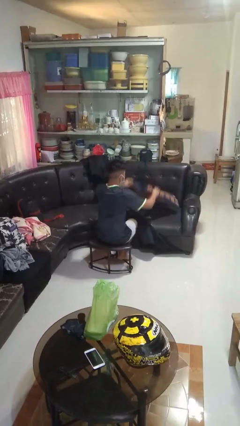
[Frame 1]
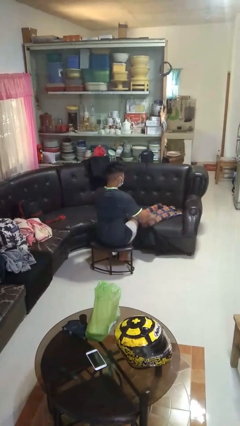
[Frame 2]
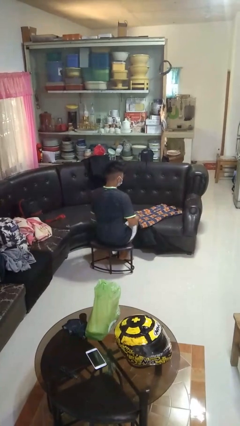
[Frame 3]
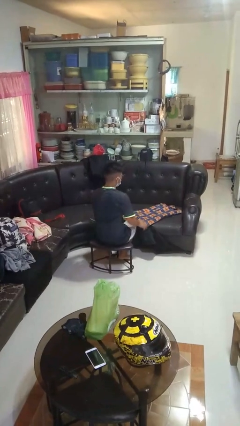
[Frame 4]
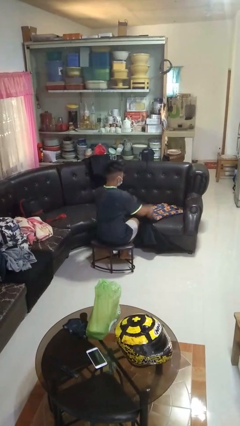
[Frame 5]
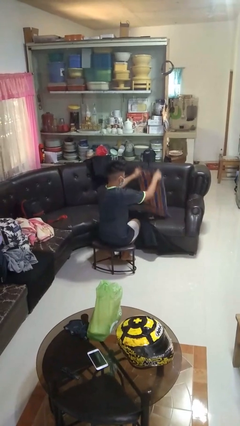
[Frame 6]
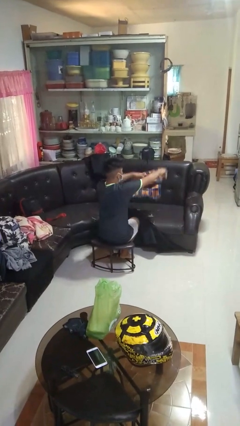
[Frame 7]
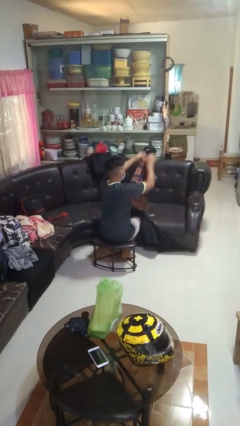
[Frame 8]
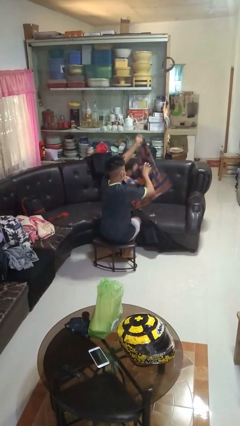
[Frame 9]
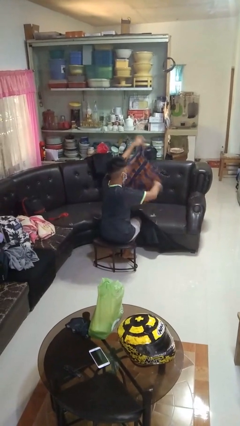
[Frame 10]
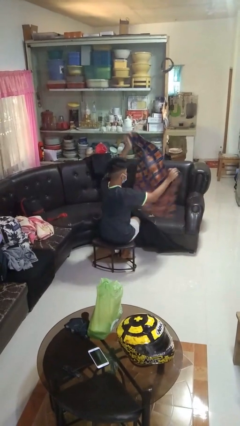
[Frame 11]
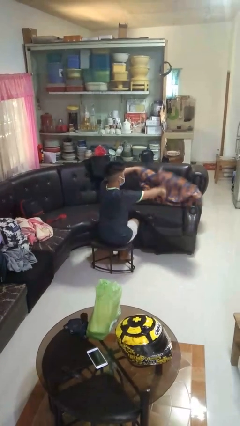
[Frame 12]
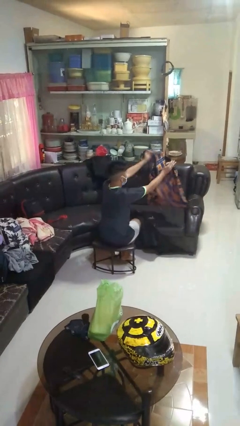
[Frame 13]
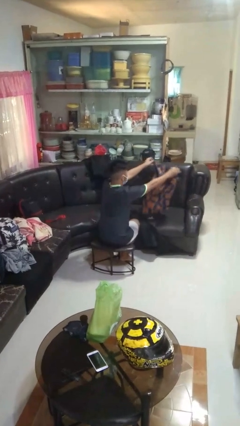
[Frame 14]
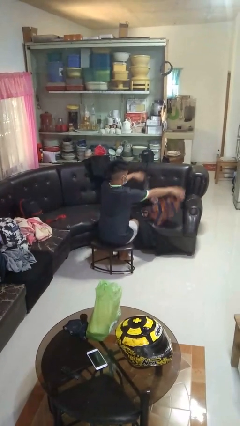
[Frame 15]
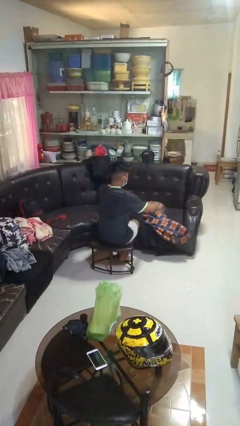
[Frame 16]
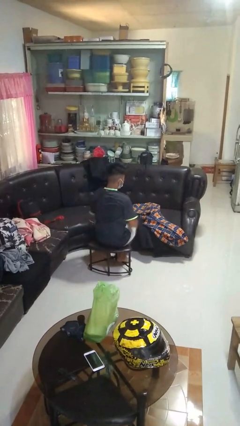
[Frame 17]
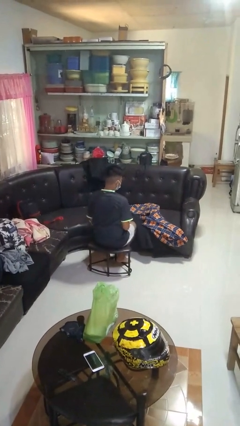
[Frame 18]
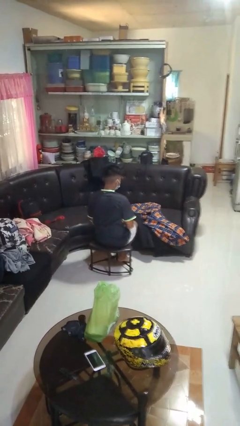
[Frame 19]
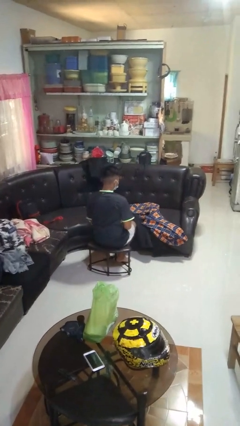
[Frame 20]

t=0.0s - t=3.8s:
person unfolds blanket

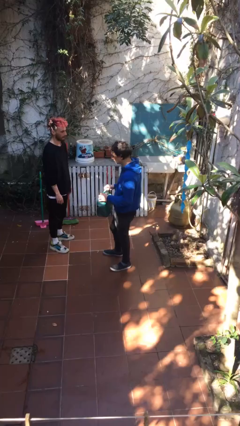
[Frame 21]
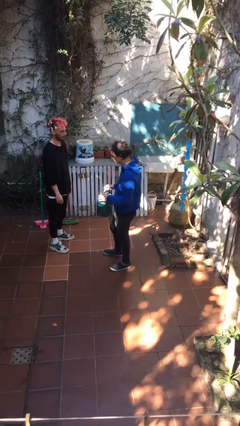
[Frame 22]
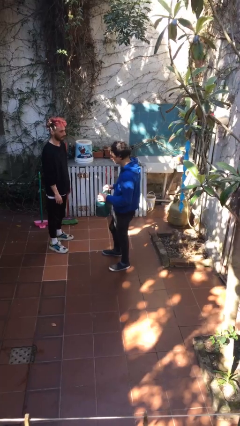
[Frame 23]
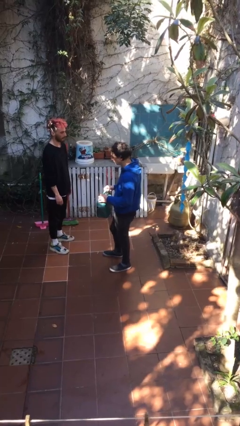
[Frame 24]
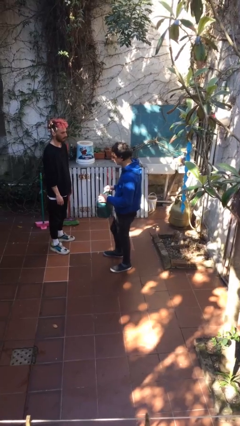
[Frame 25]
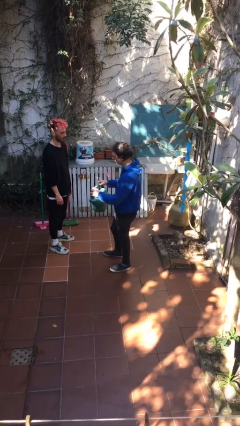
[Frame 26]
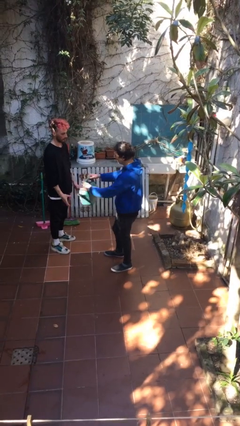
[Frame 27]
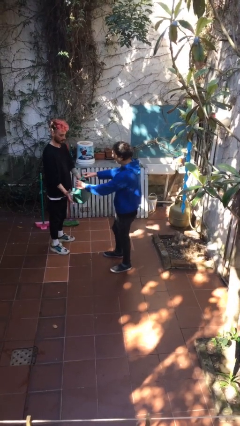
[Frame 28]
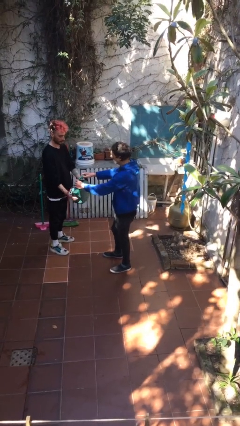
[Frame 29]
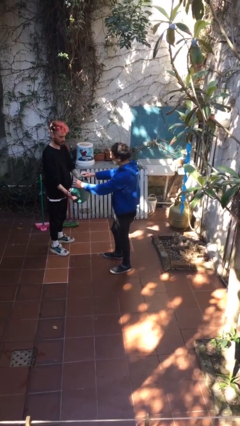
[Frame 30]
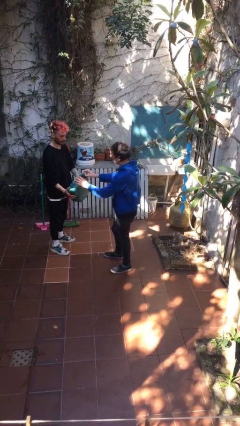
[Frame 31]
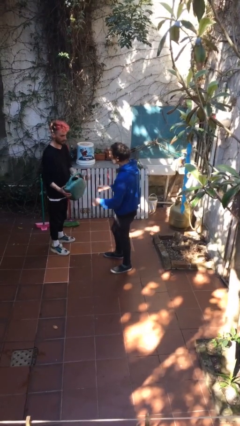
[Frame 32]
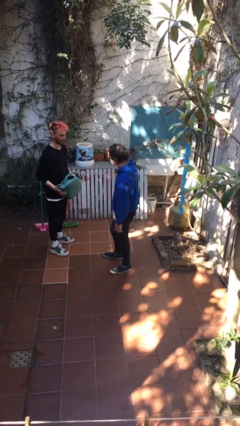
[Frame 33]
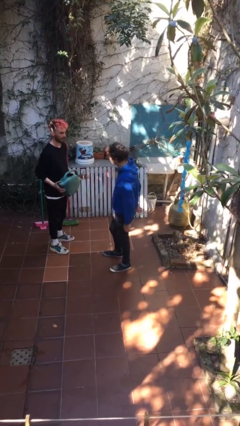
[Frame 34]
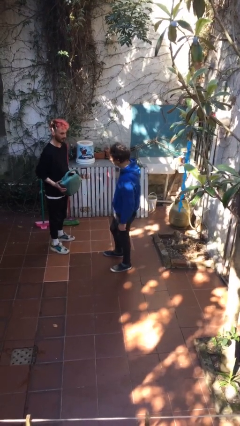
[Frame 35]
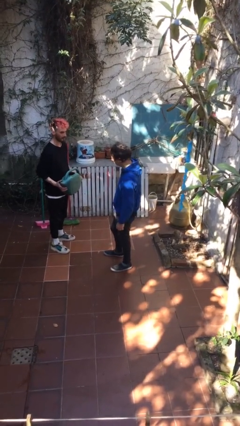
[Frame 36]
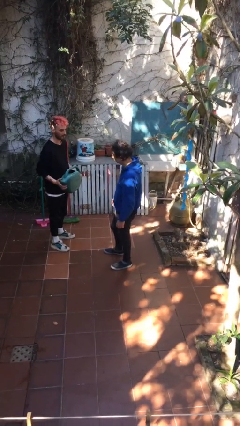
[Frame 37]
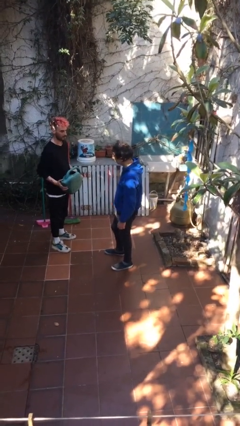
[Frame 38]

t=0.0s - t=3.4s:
person transfers object to person

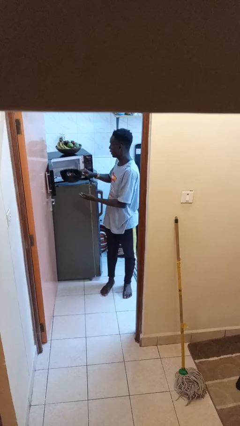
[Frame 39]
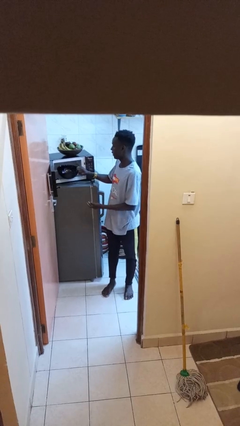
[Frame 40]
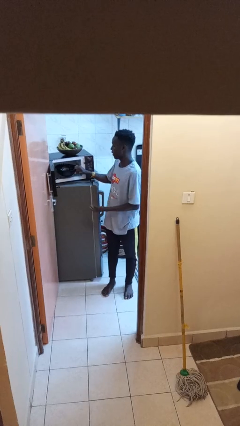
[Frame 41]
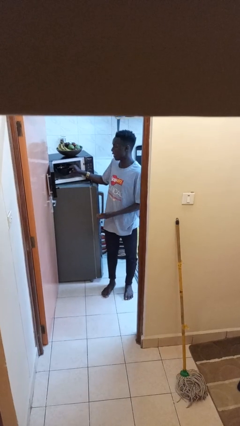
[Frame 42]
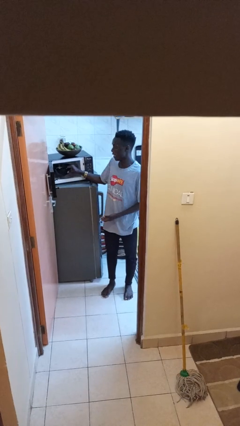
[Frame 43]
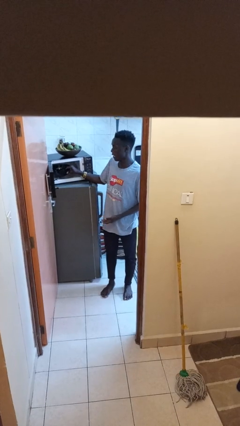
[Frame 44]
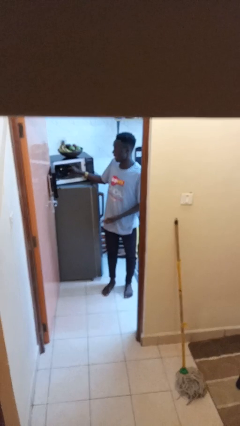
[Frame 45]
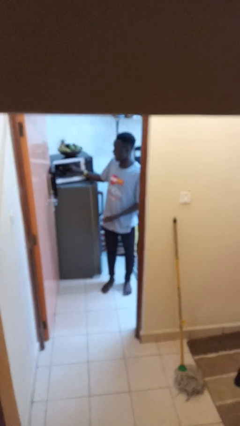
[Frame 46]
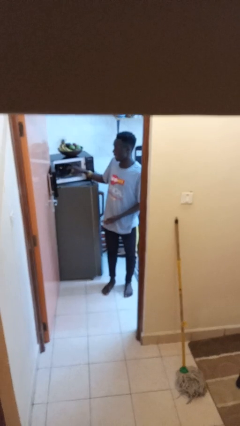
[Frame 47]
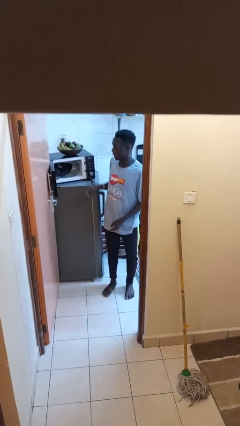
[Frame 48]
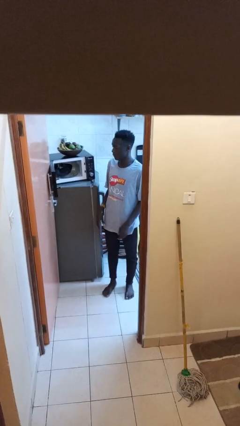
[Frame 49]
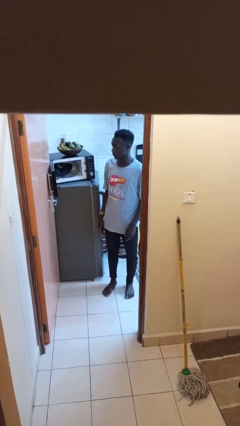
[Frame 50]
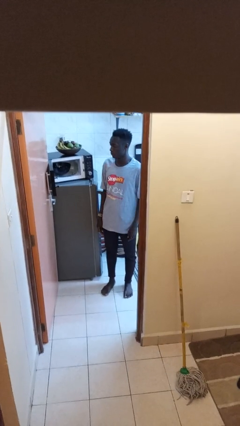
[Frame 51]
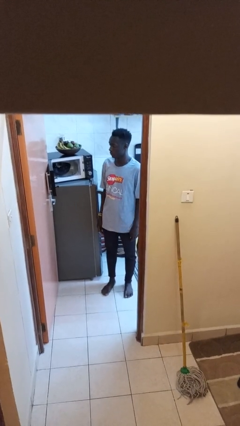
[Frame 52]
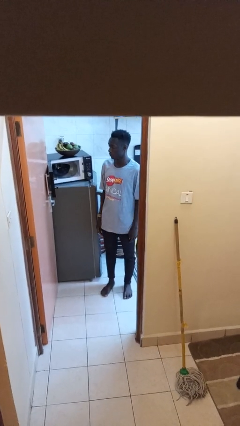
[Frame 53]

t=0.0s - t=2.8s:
person puts object into microwave

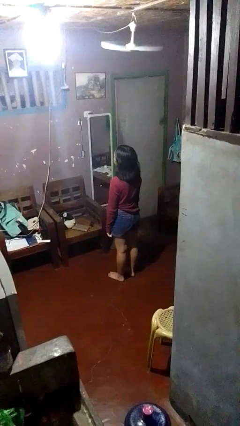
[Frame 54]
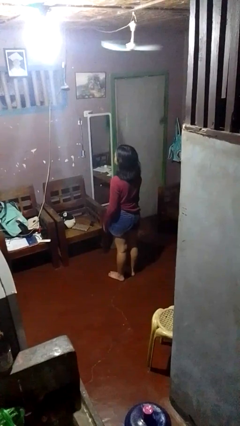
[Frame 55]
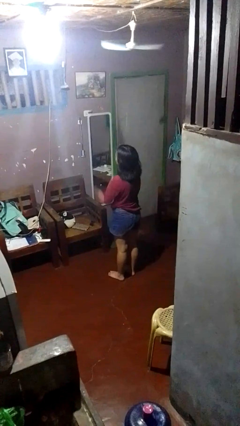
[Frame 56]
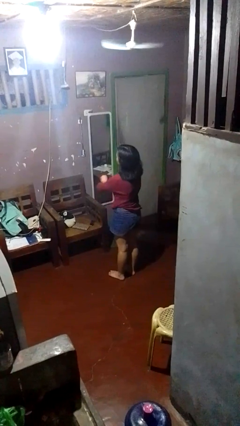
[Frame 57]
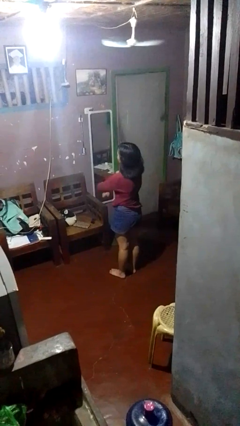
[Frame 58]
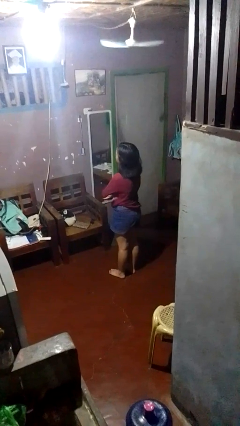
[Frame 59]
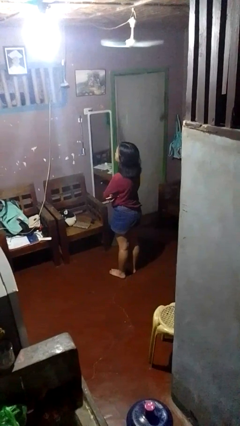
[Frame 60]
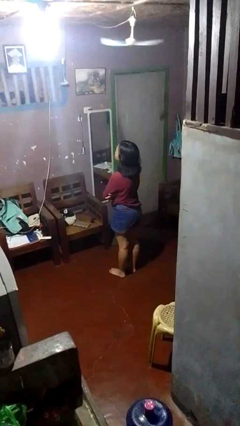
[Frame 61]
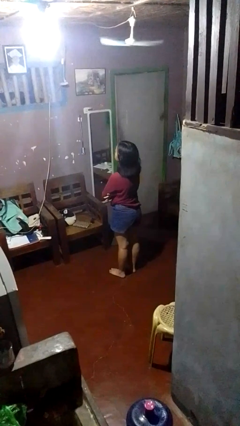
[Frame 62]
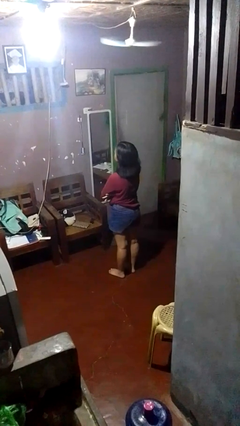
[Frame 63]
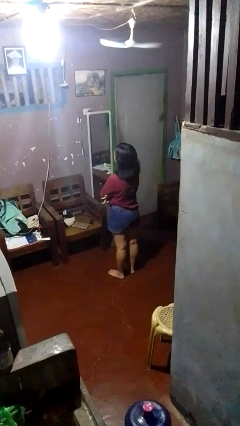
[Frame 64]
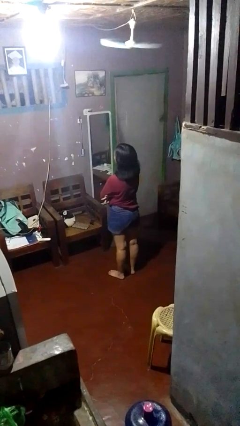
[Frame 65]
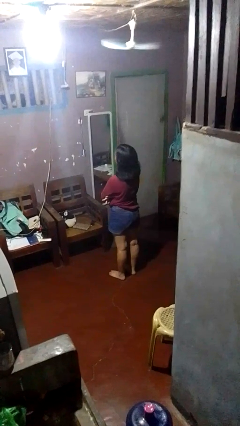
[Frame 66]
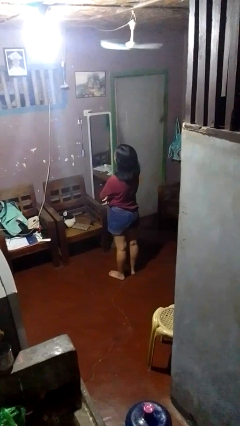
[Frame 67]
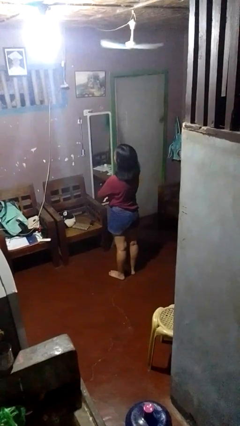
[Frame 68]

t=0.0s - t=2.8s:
person crosses arms

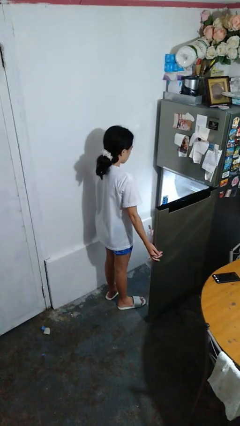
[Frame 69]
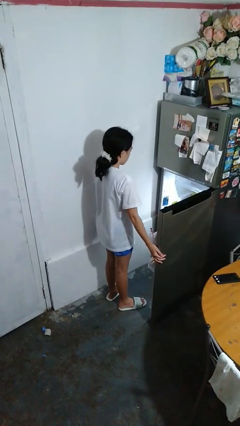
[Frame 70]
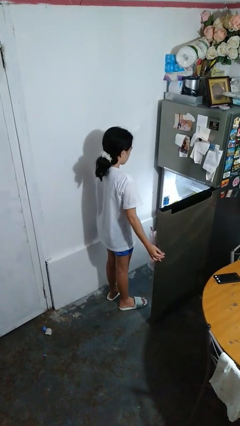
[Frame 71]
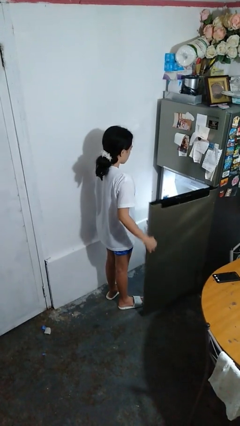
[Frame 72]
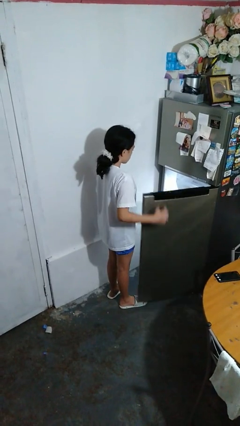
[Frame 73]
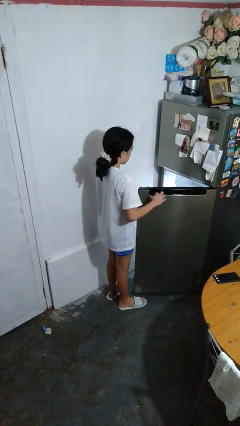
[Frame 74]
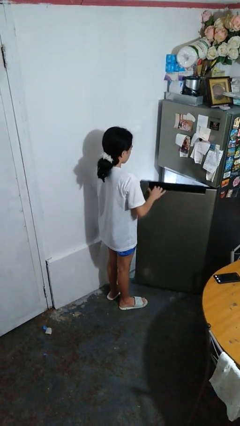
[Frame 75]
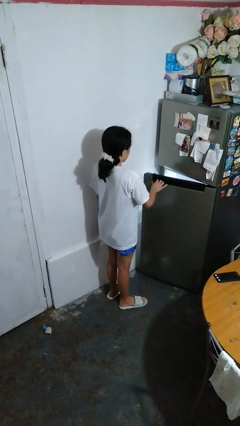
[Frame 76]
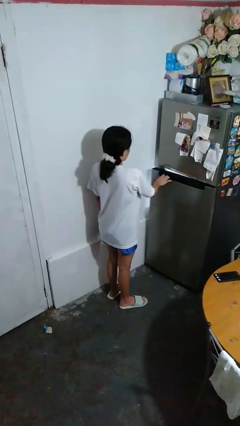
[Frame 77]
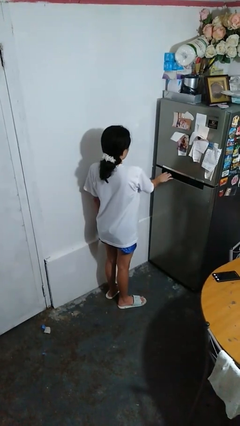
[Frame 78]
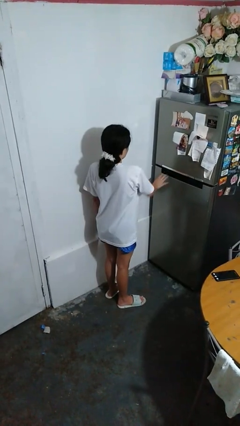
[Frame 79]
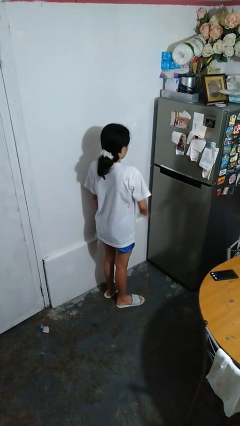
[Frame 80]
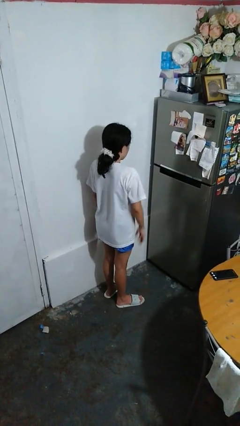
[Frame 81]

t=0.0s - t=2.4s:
person closes refrigerator

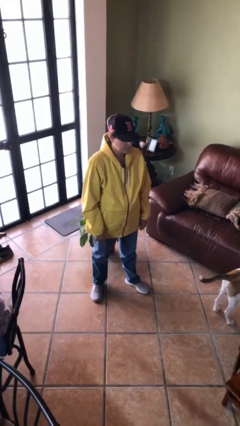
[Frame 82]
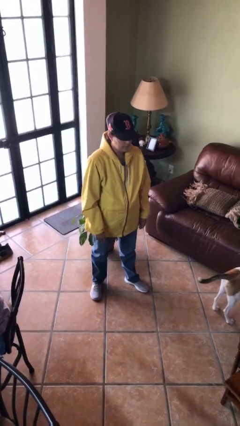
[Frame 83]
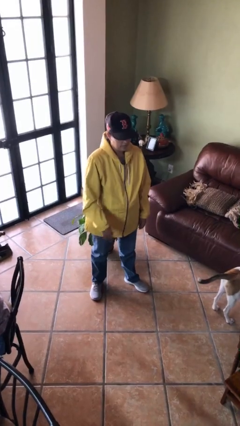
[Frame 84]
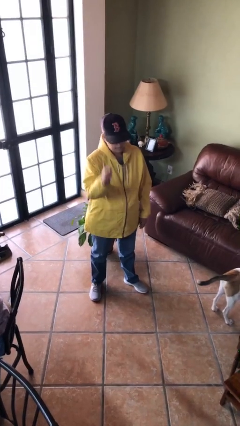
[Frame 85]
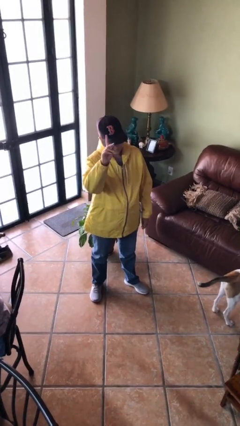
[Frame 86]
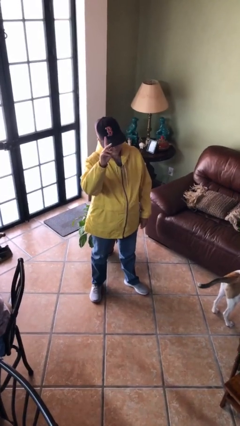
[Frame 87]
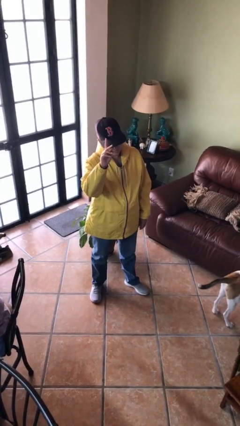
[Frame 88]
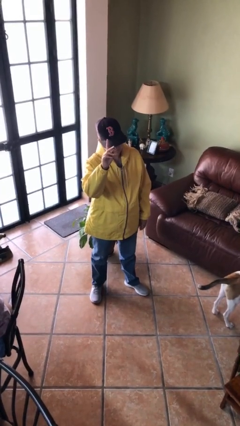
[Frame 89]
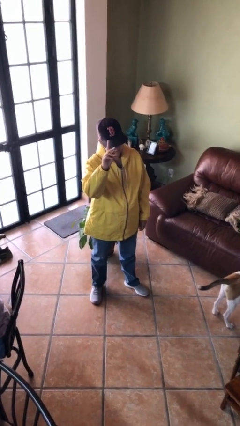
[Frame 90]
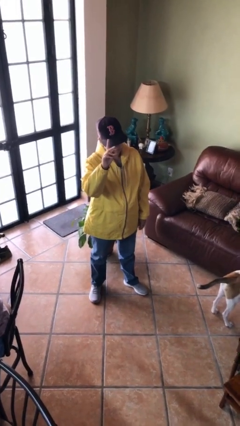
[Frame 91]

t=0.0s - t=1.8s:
person gestures raise hand

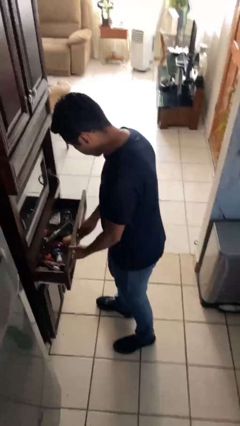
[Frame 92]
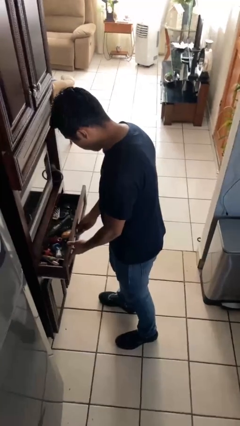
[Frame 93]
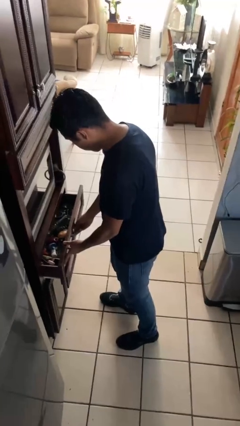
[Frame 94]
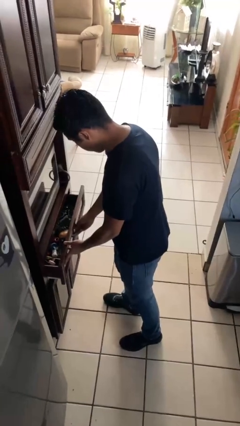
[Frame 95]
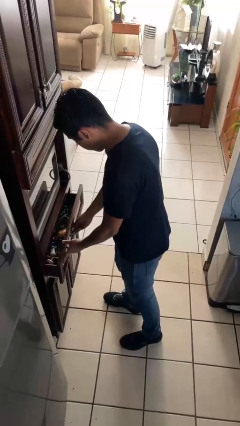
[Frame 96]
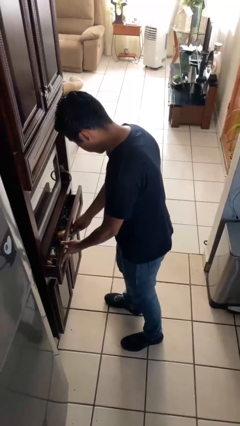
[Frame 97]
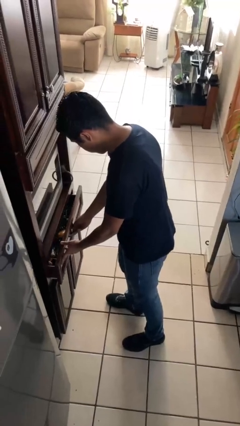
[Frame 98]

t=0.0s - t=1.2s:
person closes kitchen drawer
